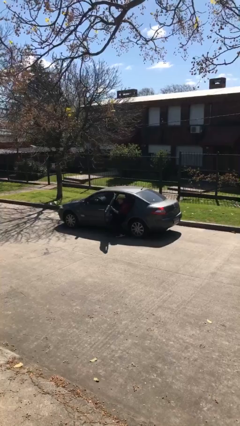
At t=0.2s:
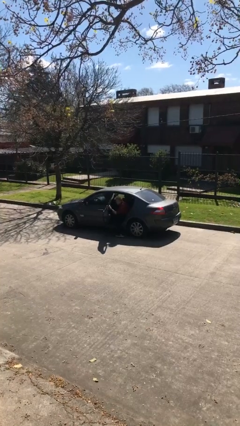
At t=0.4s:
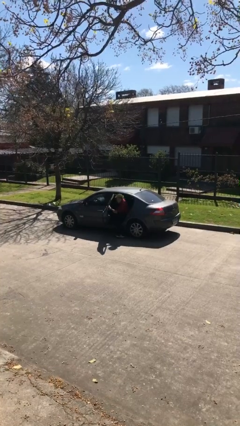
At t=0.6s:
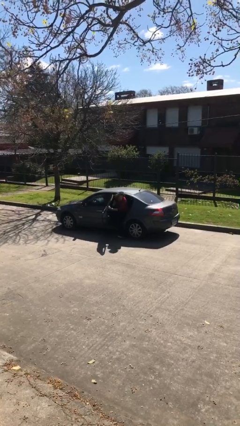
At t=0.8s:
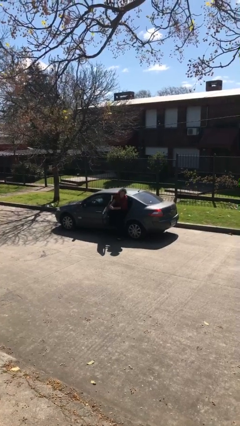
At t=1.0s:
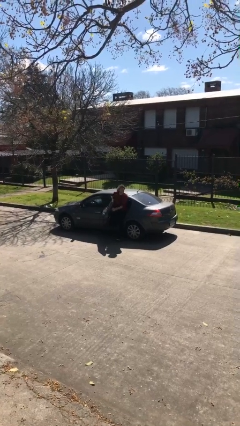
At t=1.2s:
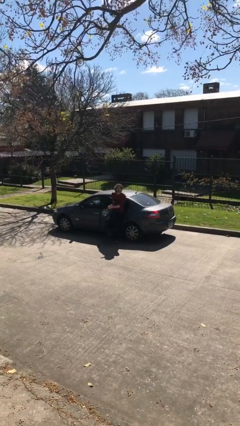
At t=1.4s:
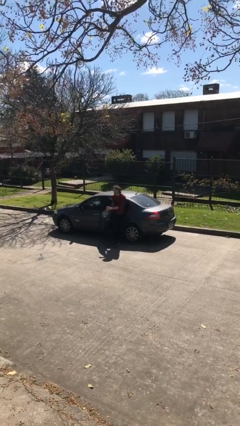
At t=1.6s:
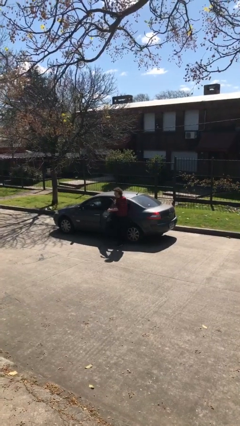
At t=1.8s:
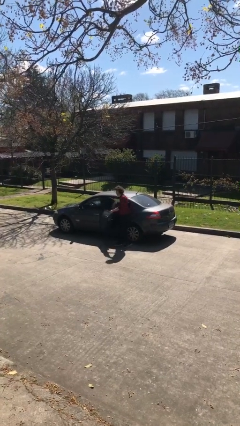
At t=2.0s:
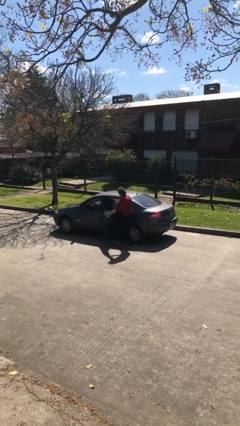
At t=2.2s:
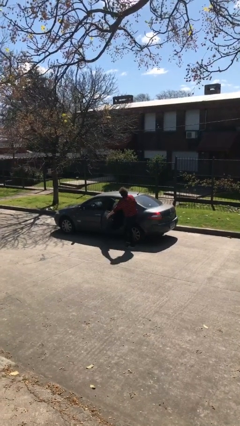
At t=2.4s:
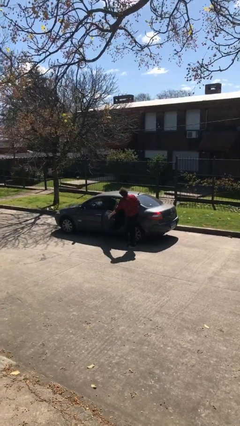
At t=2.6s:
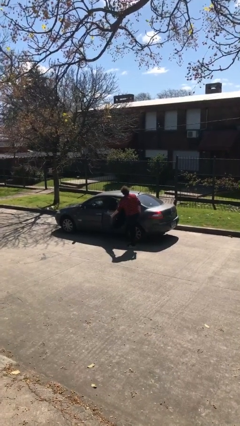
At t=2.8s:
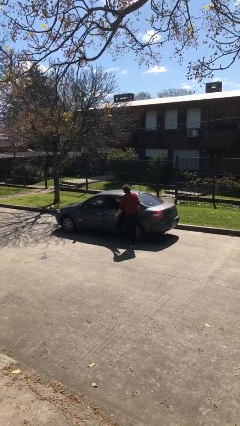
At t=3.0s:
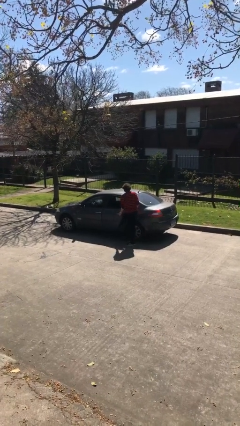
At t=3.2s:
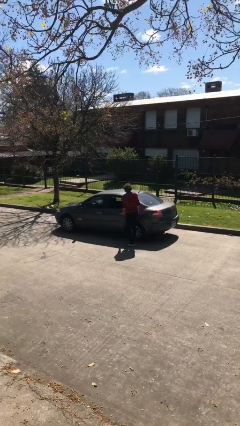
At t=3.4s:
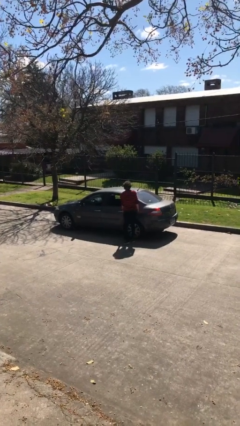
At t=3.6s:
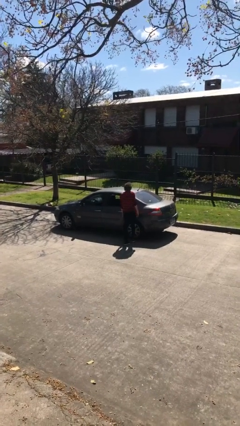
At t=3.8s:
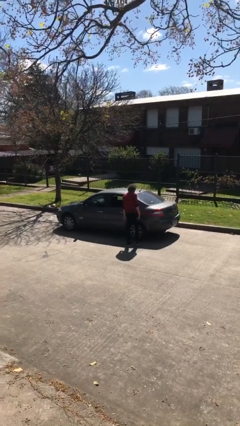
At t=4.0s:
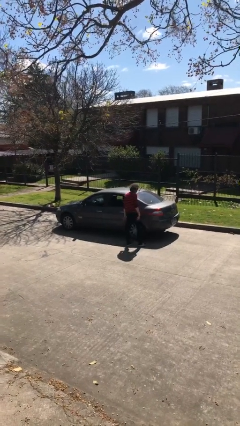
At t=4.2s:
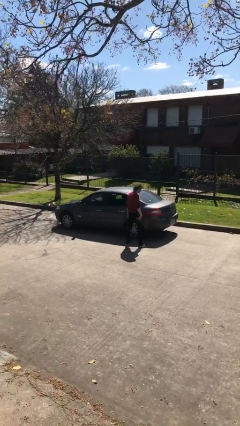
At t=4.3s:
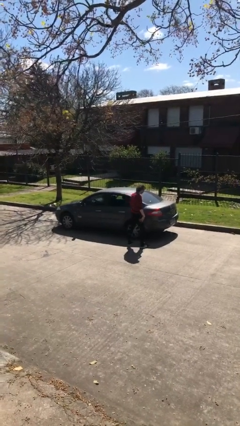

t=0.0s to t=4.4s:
car drops off person

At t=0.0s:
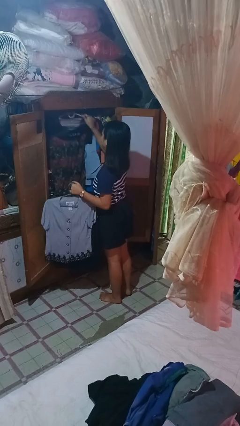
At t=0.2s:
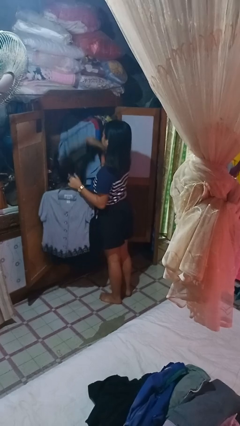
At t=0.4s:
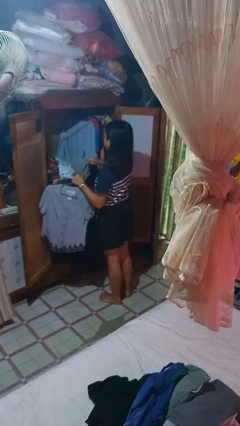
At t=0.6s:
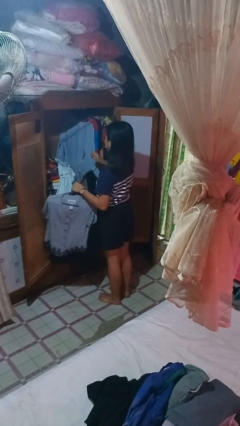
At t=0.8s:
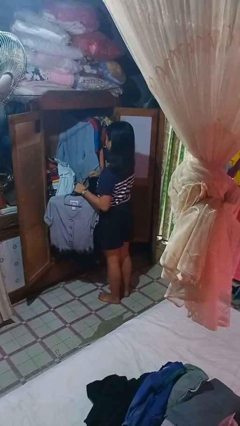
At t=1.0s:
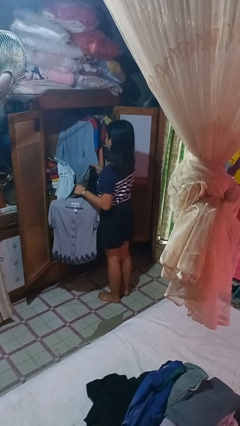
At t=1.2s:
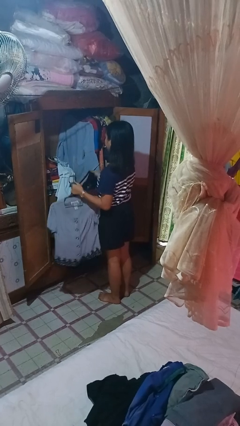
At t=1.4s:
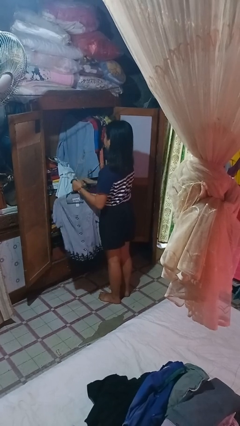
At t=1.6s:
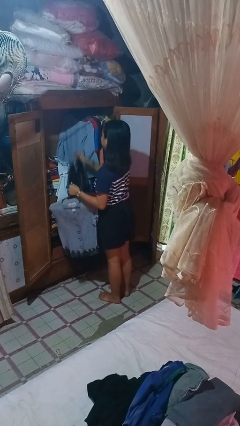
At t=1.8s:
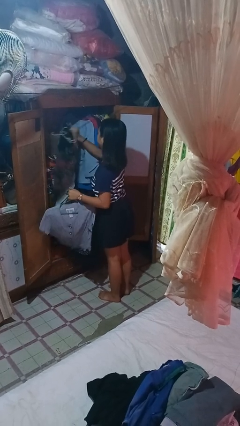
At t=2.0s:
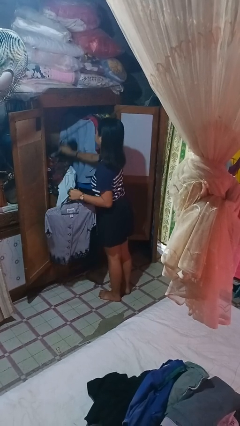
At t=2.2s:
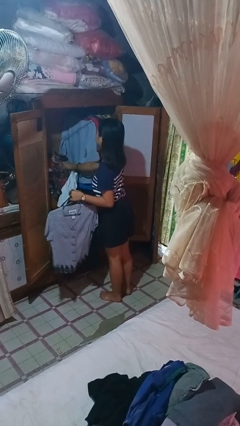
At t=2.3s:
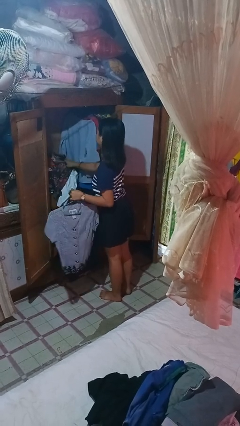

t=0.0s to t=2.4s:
person takes clothes from closet

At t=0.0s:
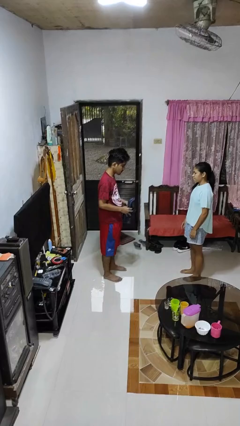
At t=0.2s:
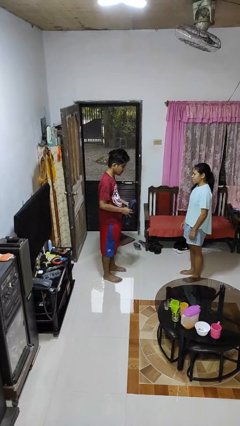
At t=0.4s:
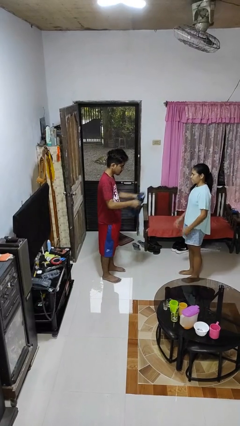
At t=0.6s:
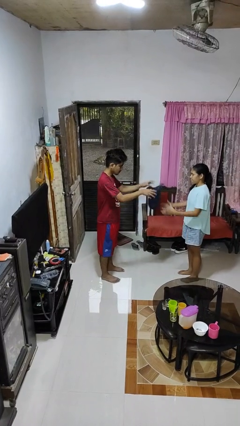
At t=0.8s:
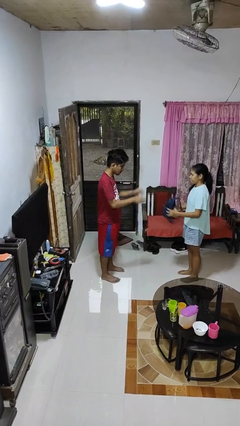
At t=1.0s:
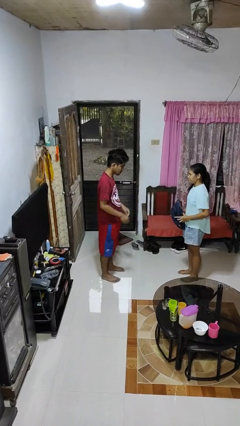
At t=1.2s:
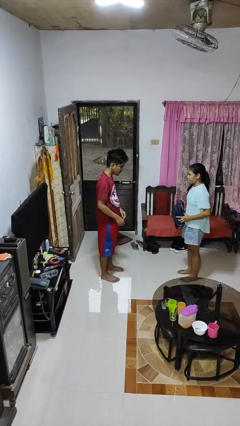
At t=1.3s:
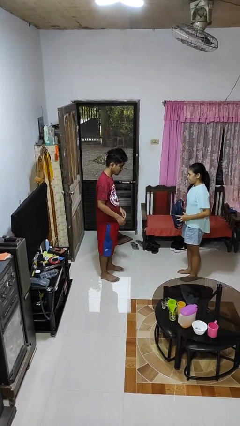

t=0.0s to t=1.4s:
person throws object to person

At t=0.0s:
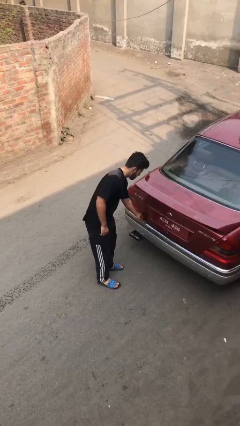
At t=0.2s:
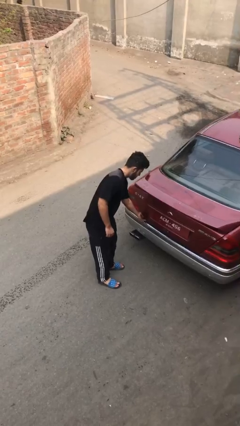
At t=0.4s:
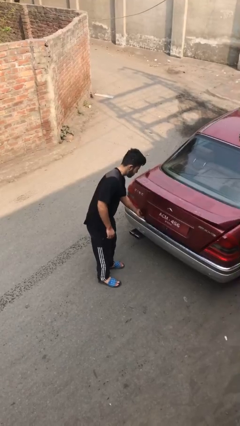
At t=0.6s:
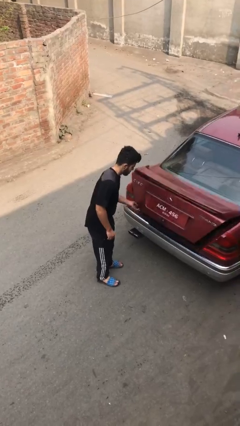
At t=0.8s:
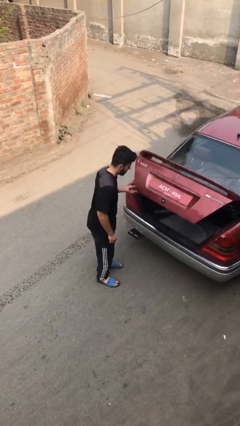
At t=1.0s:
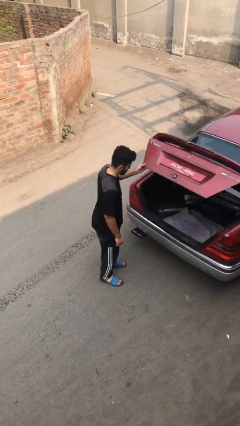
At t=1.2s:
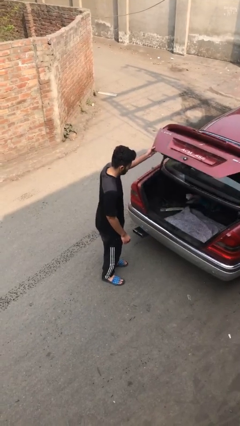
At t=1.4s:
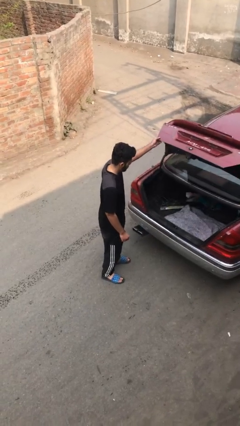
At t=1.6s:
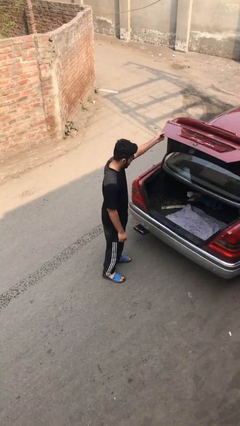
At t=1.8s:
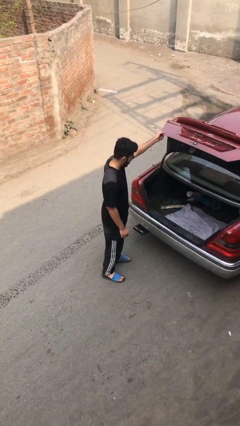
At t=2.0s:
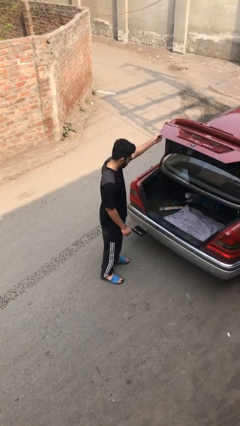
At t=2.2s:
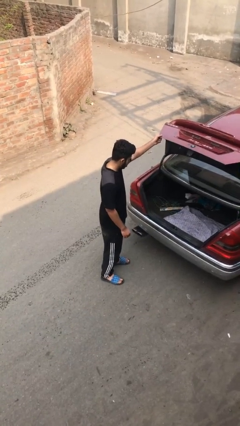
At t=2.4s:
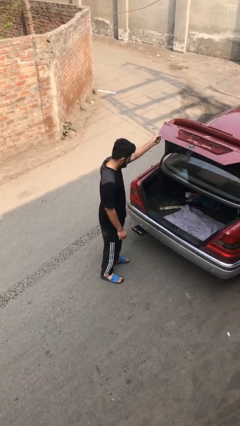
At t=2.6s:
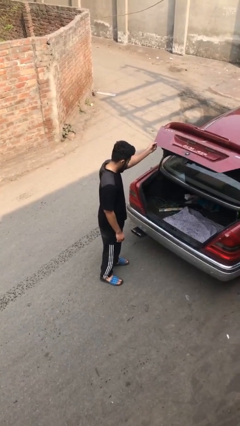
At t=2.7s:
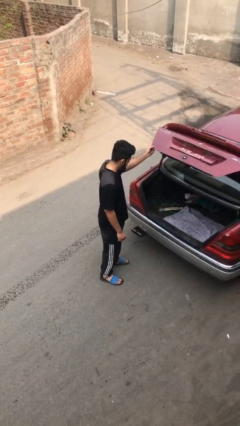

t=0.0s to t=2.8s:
person opens car trunk

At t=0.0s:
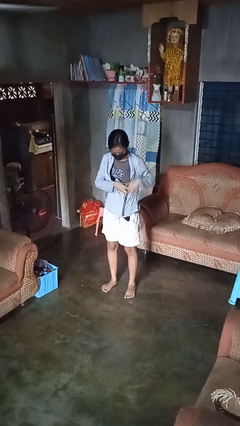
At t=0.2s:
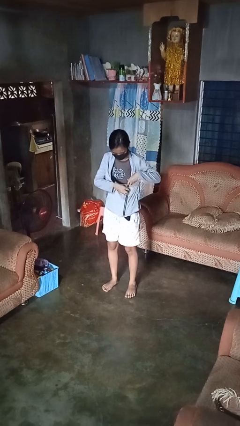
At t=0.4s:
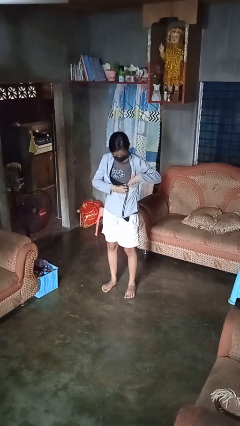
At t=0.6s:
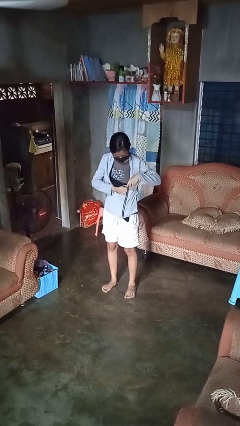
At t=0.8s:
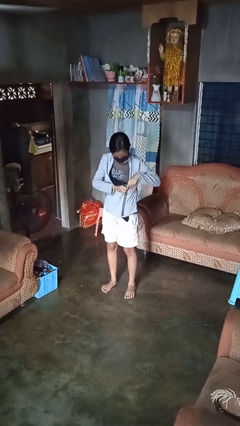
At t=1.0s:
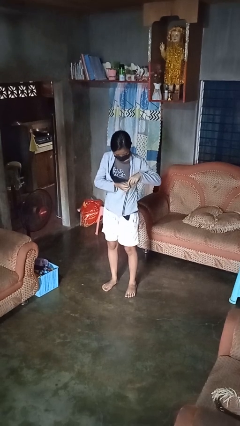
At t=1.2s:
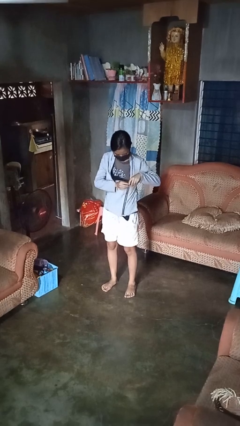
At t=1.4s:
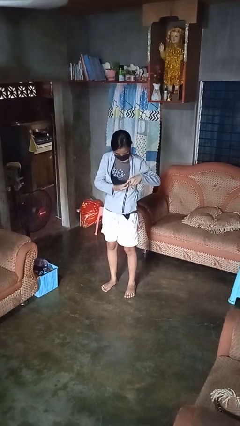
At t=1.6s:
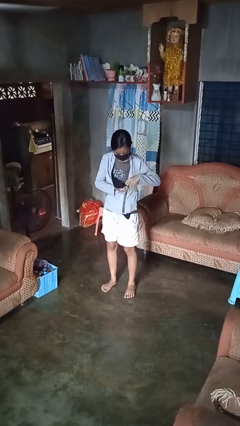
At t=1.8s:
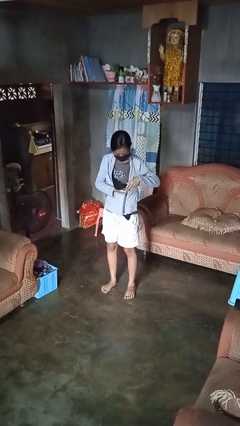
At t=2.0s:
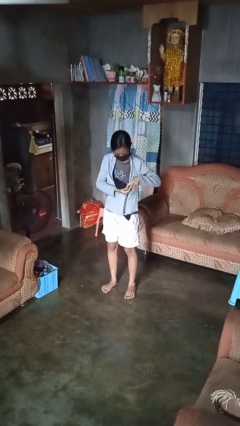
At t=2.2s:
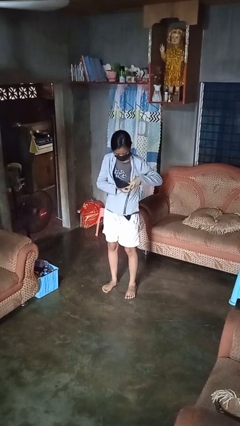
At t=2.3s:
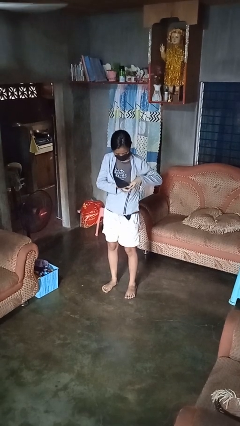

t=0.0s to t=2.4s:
person unzips jacket

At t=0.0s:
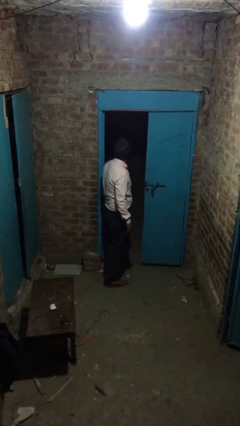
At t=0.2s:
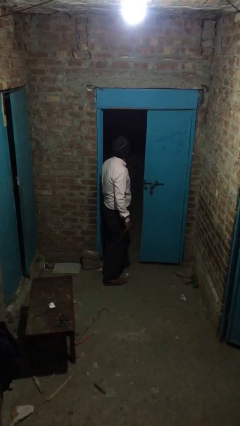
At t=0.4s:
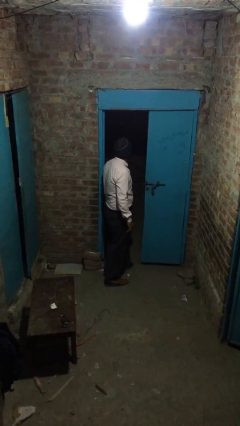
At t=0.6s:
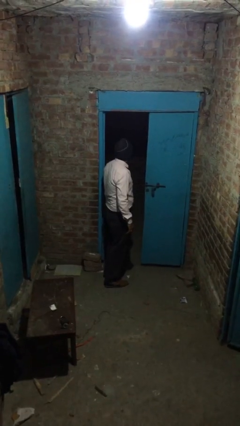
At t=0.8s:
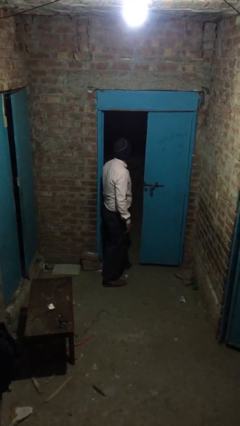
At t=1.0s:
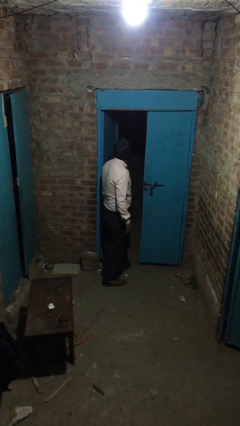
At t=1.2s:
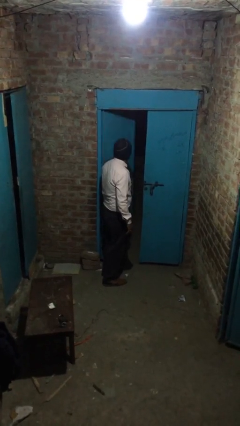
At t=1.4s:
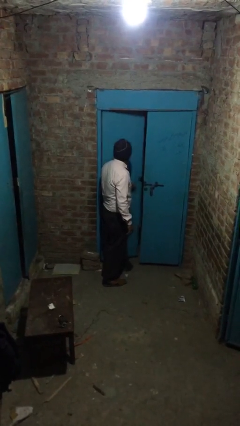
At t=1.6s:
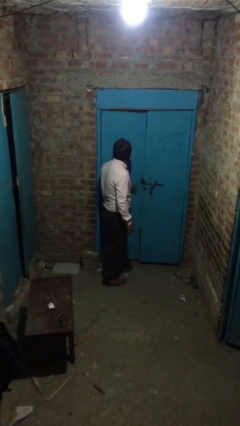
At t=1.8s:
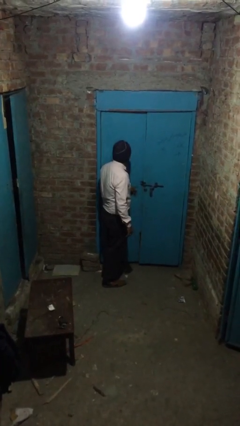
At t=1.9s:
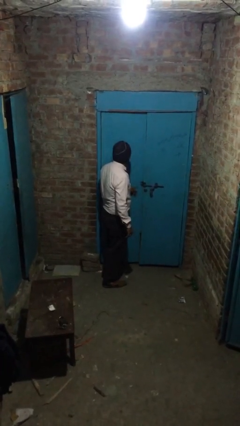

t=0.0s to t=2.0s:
person closes facility door

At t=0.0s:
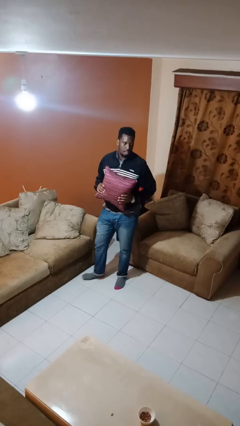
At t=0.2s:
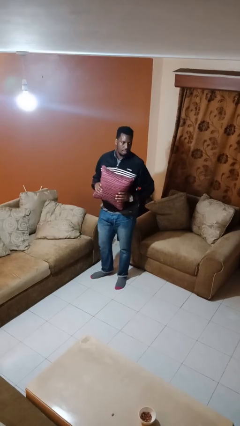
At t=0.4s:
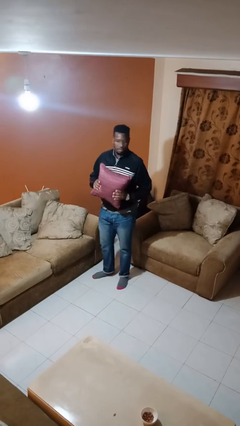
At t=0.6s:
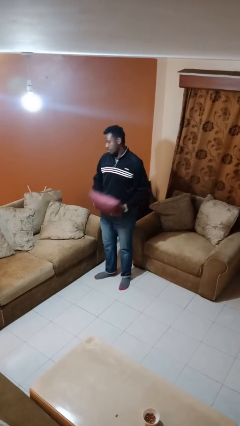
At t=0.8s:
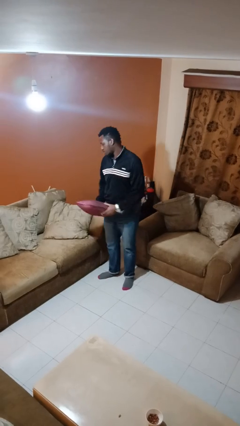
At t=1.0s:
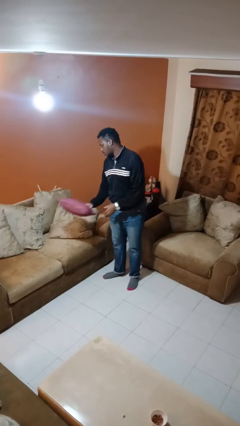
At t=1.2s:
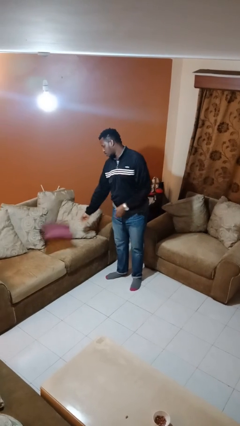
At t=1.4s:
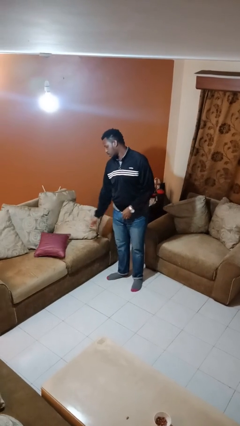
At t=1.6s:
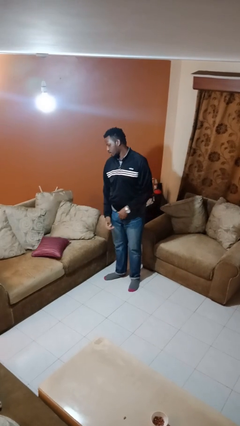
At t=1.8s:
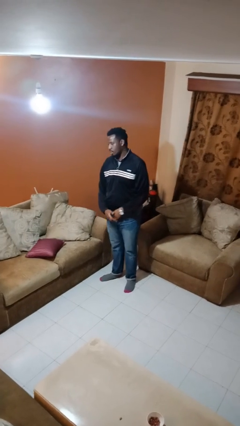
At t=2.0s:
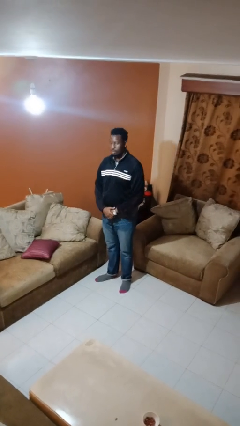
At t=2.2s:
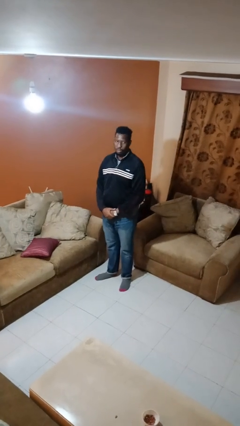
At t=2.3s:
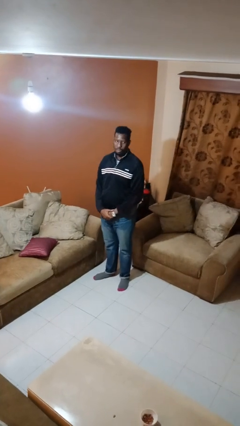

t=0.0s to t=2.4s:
person puts down object on couch
